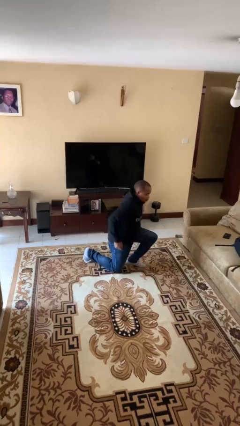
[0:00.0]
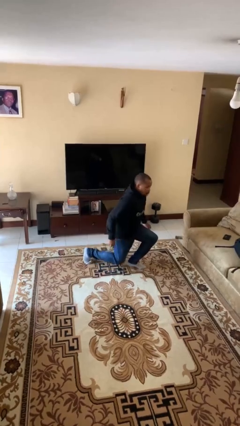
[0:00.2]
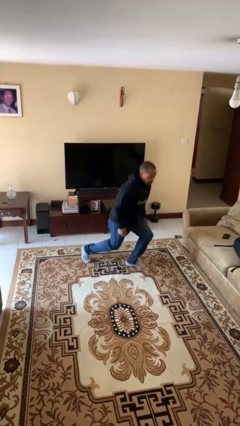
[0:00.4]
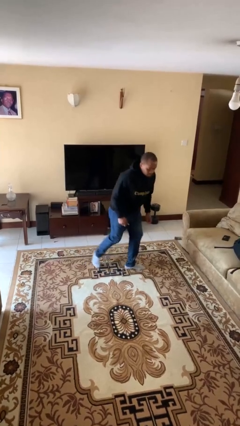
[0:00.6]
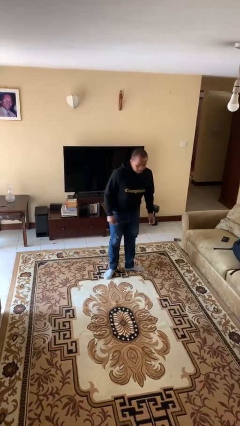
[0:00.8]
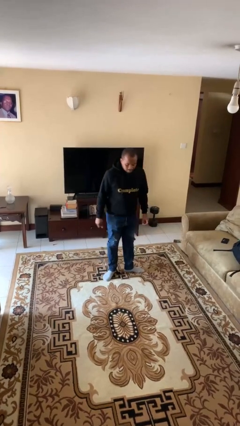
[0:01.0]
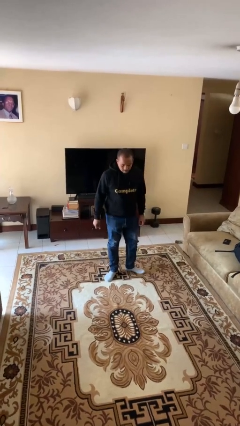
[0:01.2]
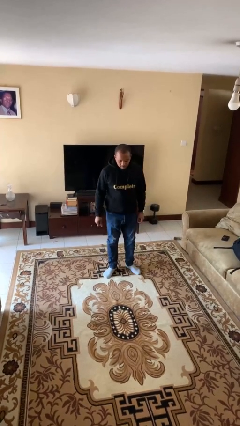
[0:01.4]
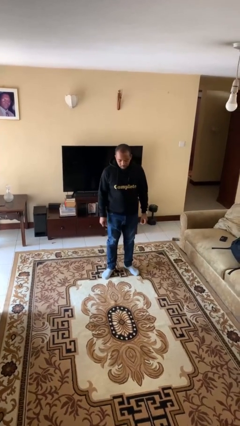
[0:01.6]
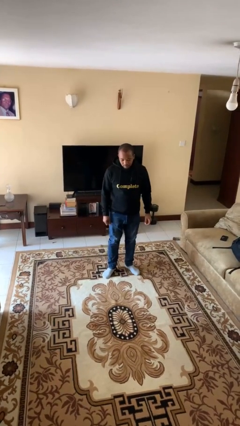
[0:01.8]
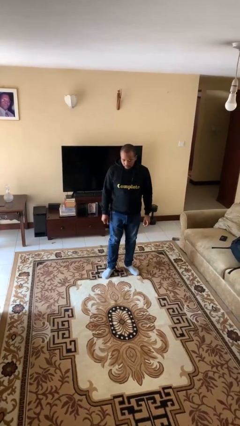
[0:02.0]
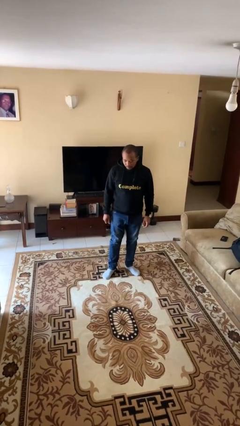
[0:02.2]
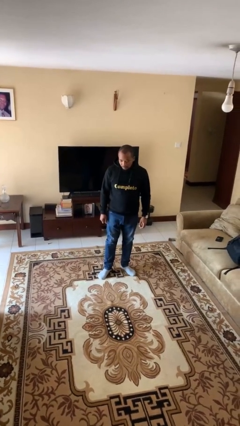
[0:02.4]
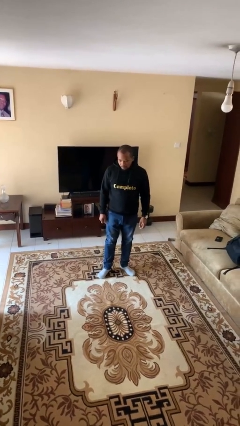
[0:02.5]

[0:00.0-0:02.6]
person stands up from floor

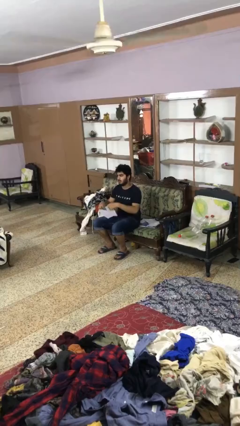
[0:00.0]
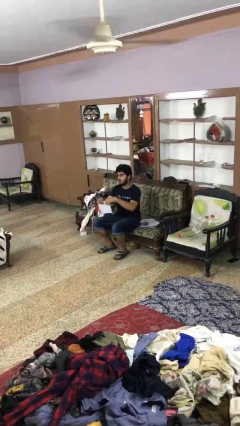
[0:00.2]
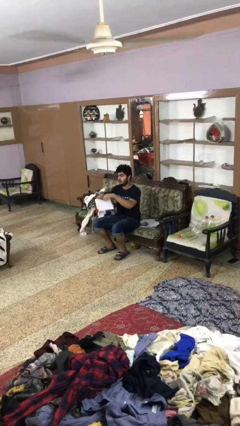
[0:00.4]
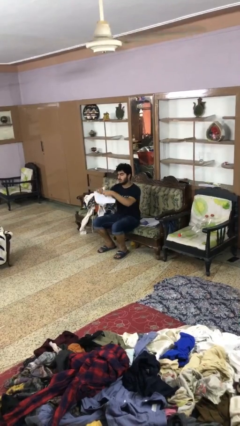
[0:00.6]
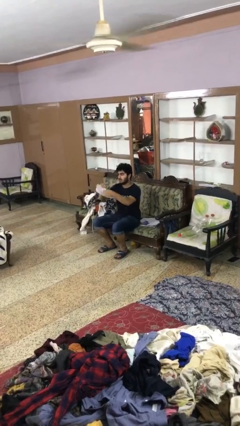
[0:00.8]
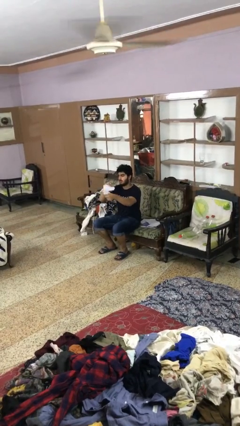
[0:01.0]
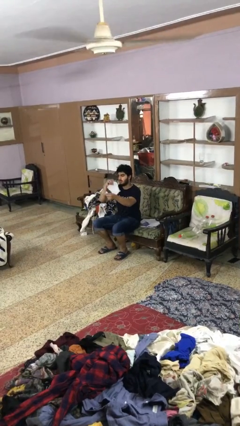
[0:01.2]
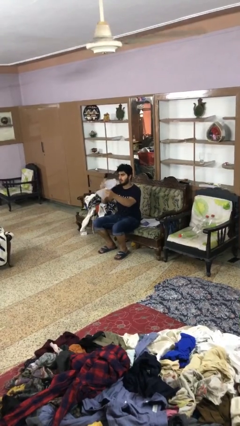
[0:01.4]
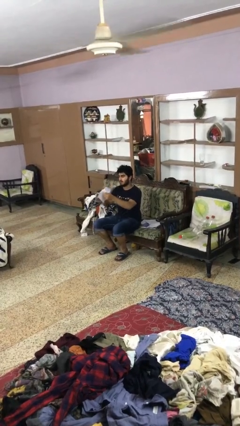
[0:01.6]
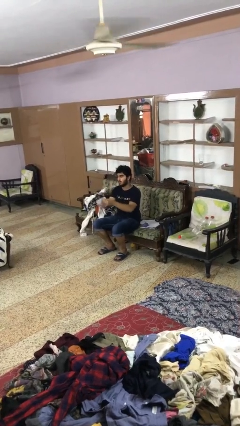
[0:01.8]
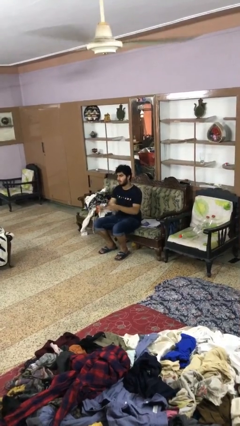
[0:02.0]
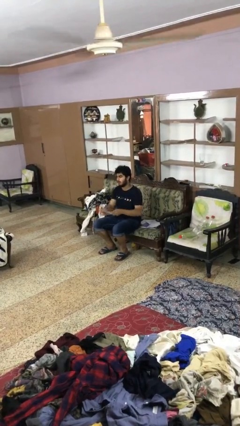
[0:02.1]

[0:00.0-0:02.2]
person tears paper

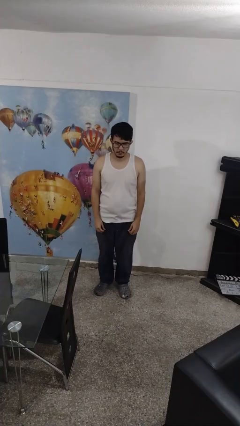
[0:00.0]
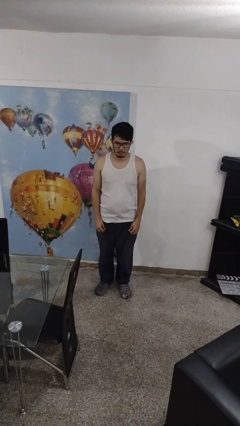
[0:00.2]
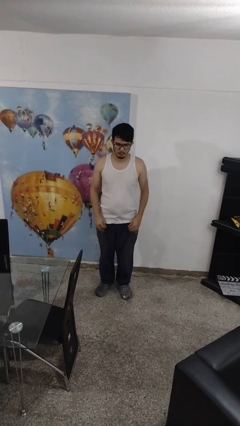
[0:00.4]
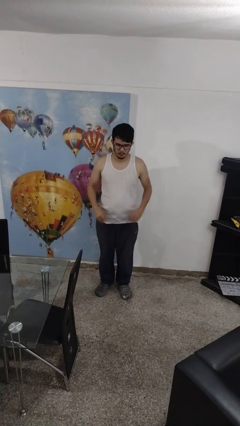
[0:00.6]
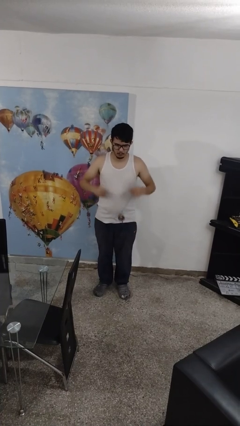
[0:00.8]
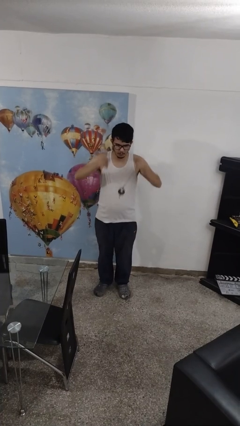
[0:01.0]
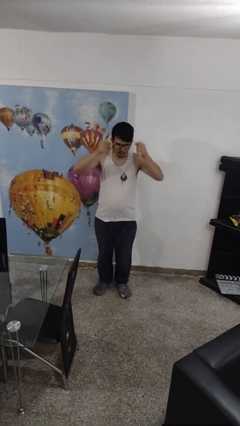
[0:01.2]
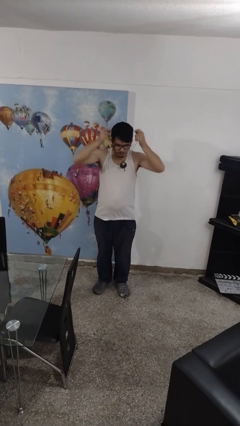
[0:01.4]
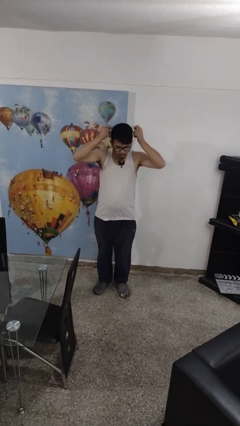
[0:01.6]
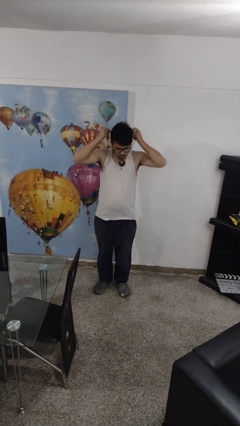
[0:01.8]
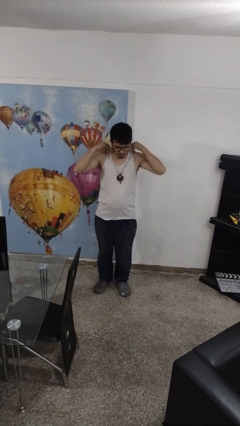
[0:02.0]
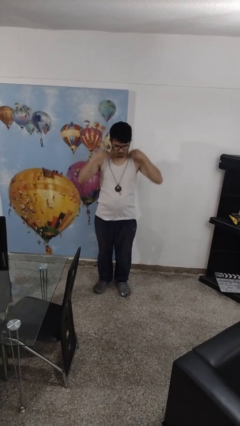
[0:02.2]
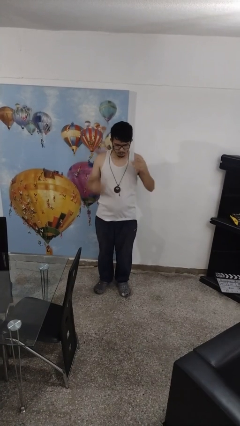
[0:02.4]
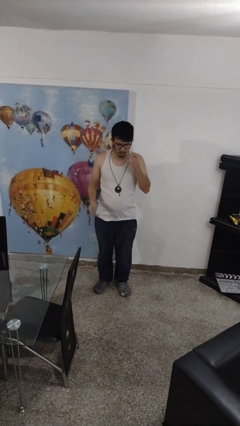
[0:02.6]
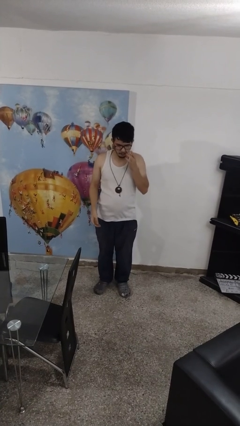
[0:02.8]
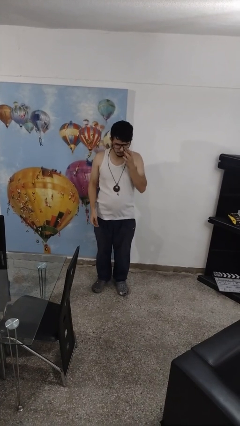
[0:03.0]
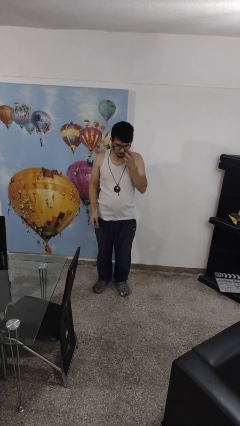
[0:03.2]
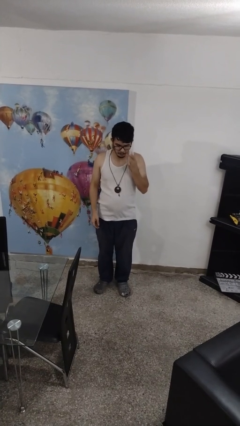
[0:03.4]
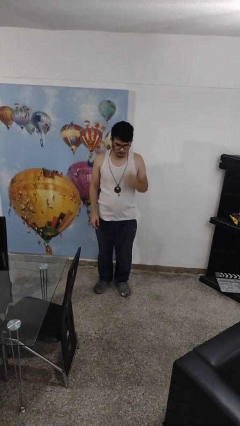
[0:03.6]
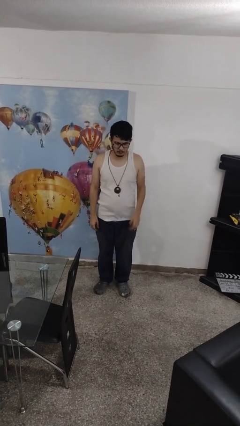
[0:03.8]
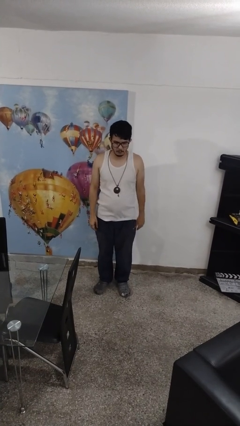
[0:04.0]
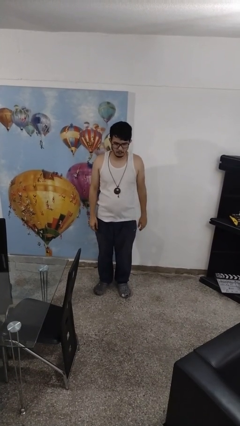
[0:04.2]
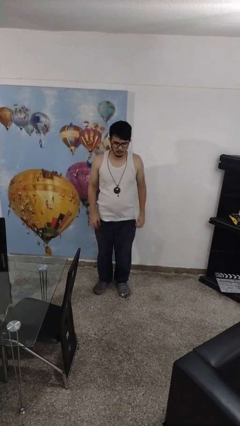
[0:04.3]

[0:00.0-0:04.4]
person puts on necklace

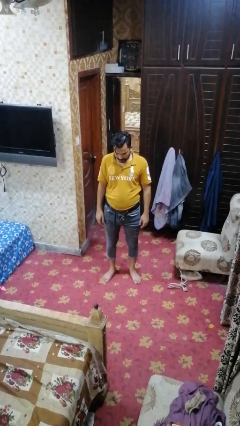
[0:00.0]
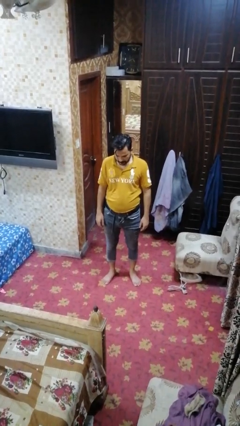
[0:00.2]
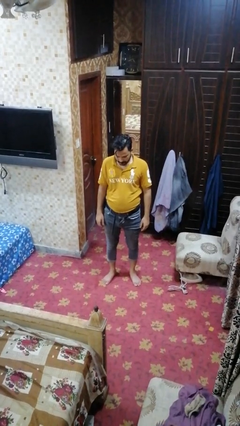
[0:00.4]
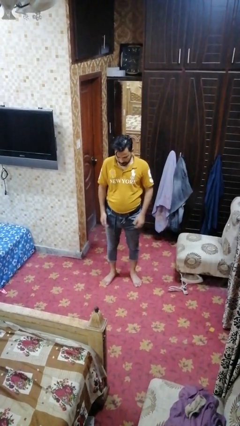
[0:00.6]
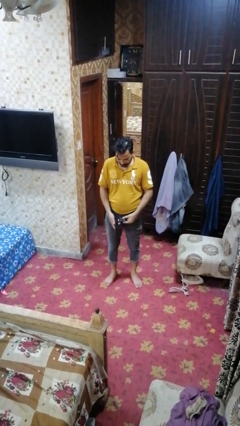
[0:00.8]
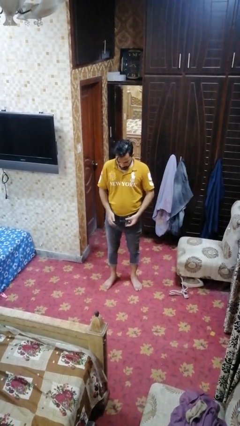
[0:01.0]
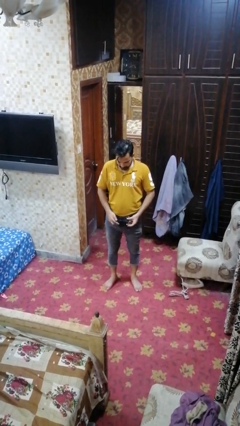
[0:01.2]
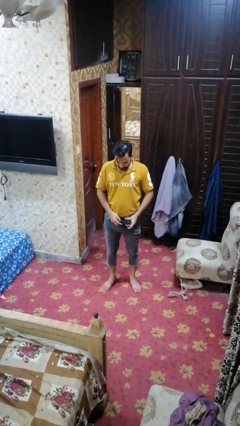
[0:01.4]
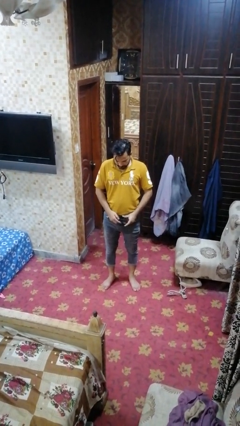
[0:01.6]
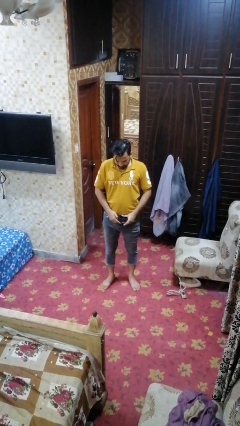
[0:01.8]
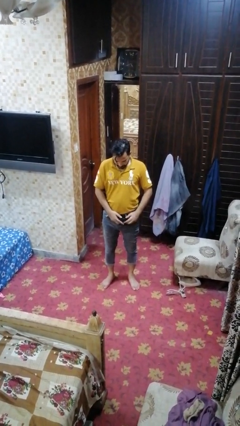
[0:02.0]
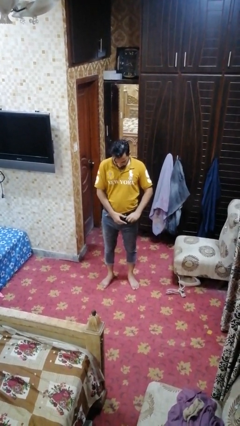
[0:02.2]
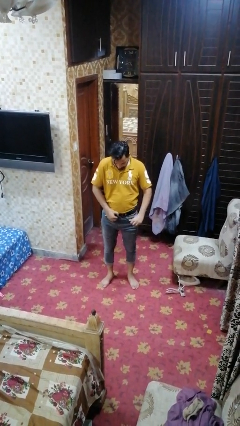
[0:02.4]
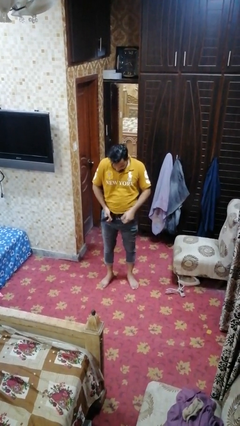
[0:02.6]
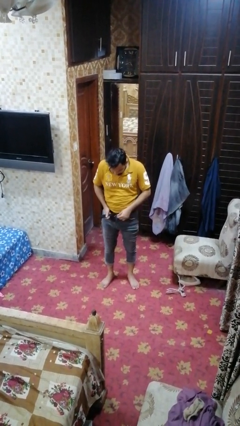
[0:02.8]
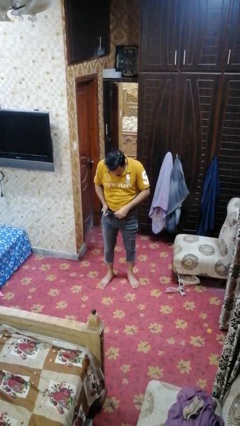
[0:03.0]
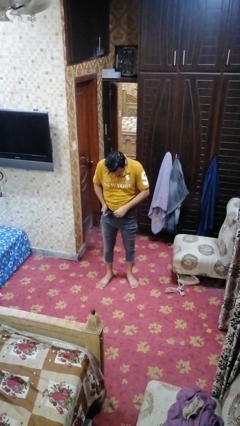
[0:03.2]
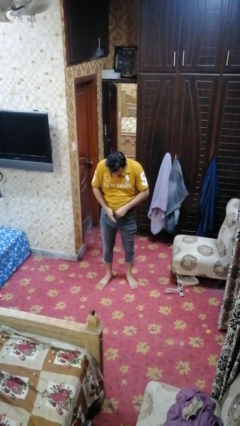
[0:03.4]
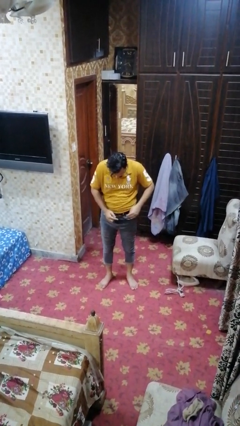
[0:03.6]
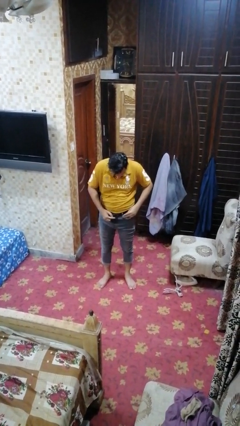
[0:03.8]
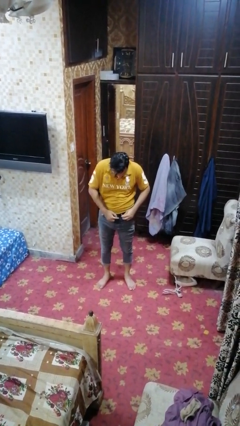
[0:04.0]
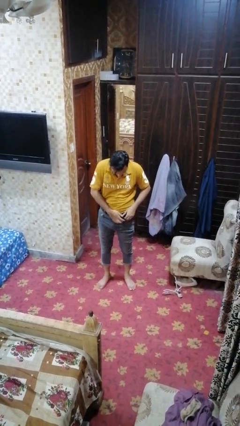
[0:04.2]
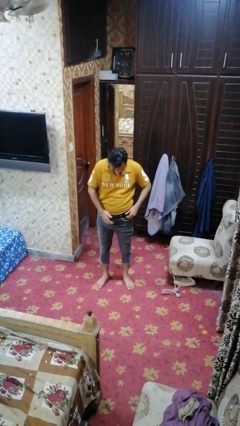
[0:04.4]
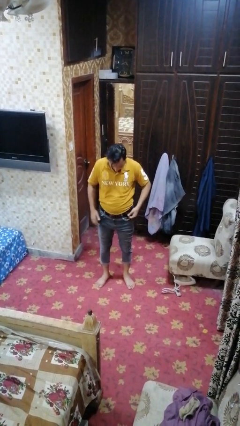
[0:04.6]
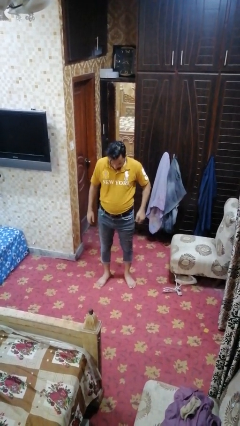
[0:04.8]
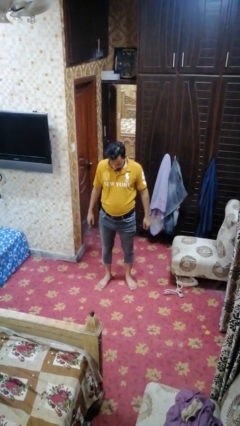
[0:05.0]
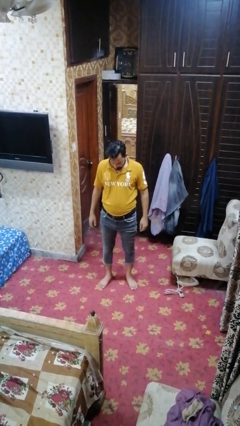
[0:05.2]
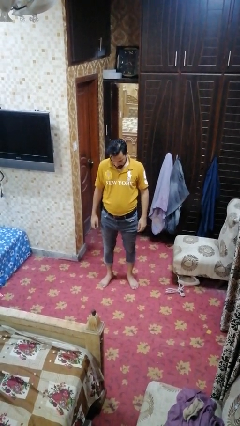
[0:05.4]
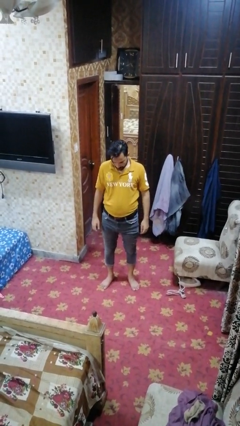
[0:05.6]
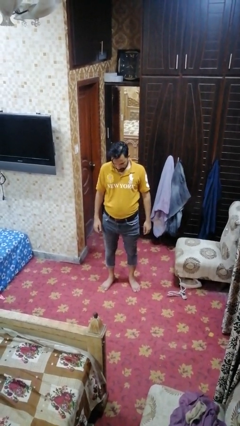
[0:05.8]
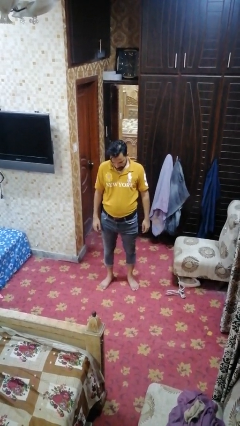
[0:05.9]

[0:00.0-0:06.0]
person puts on belt

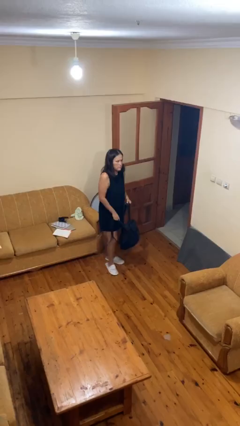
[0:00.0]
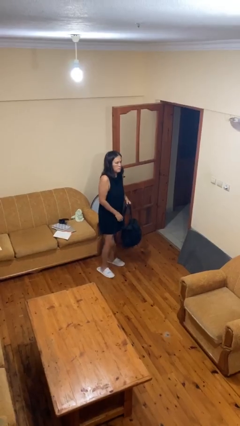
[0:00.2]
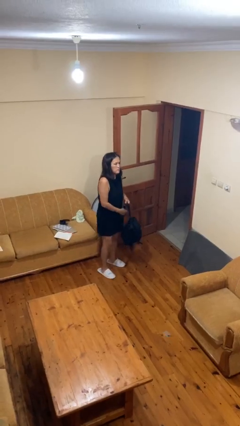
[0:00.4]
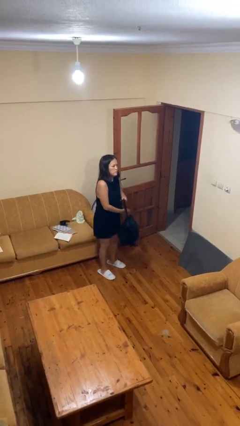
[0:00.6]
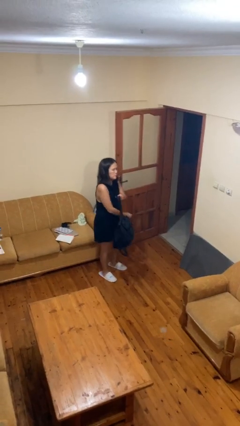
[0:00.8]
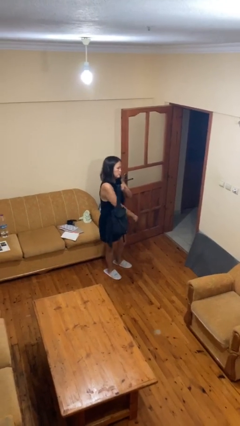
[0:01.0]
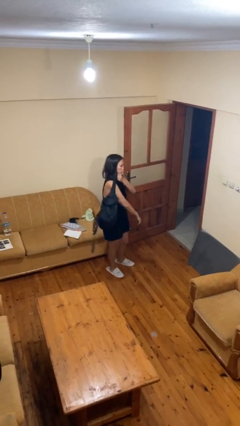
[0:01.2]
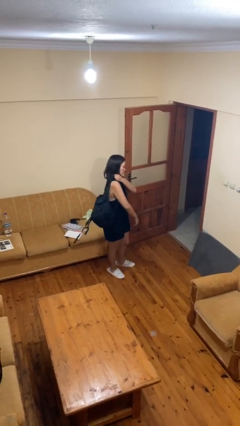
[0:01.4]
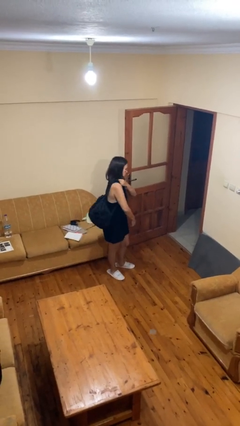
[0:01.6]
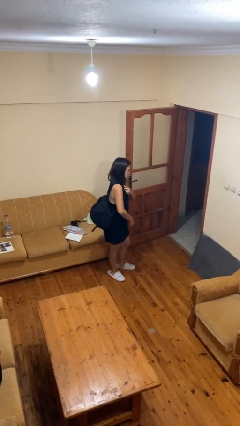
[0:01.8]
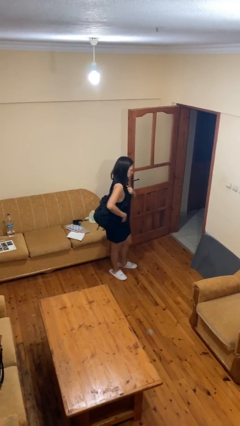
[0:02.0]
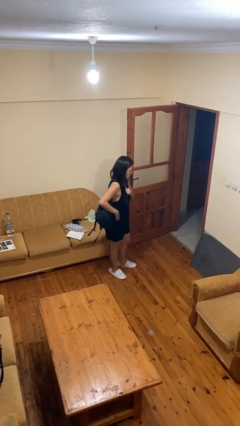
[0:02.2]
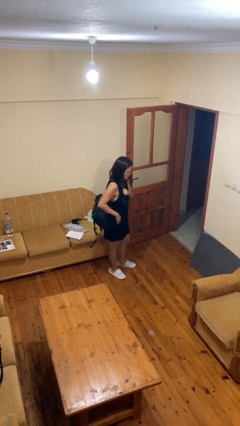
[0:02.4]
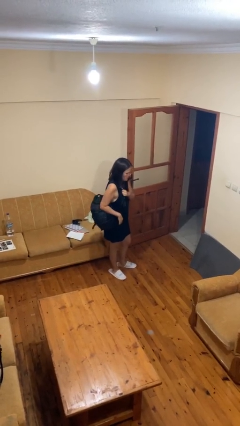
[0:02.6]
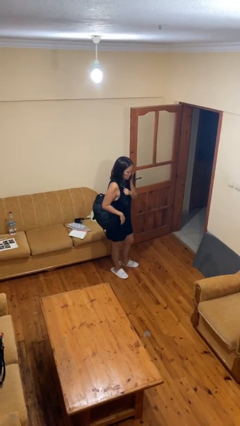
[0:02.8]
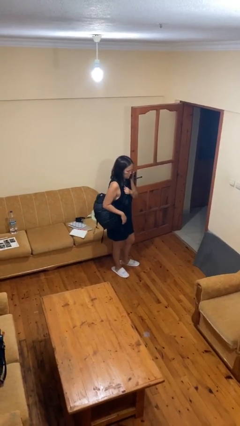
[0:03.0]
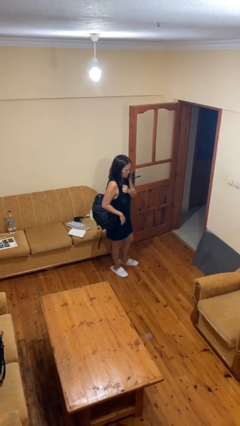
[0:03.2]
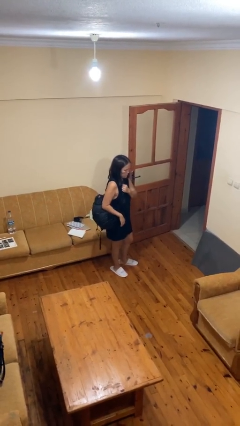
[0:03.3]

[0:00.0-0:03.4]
person puts on backpack
